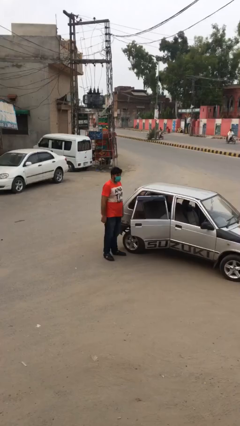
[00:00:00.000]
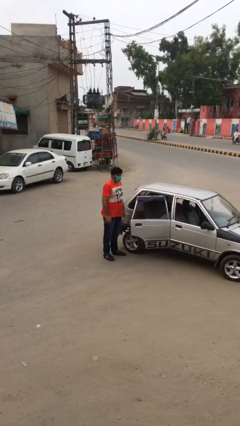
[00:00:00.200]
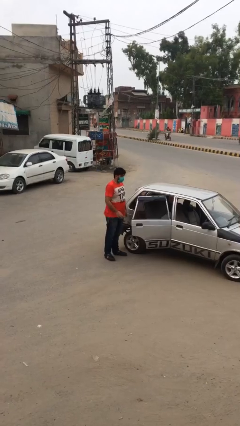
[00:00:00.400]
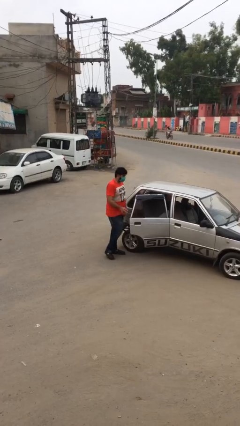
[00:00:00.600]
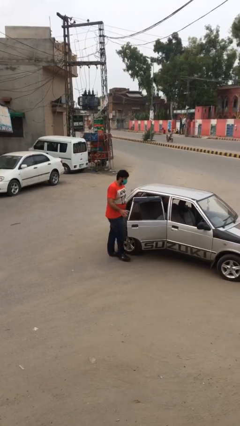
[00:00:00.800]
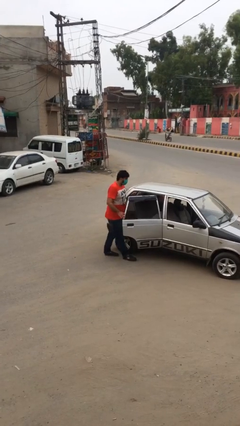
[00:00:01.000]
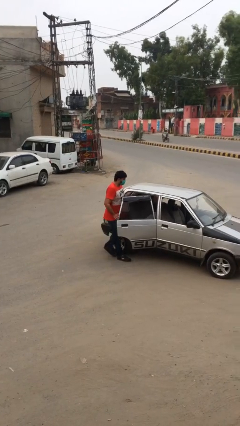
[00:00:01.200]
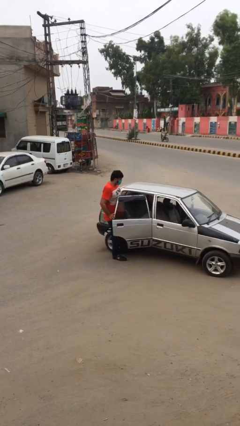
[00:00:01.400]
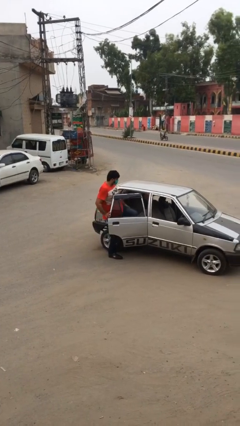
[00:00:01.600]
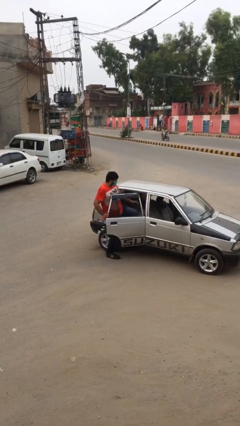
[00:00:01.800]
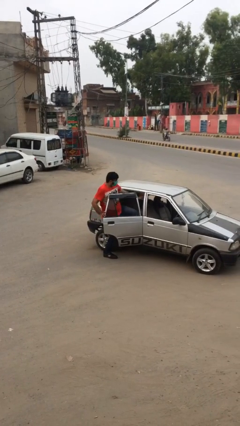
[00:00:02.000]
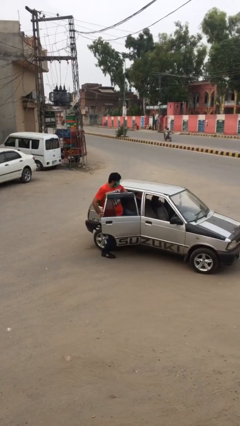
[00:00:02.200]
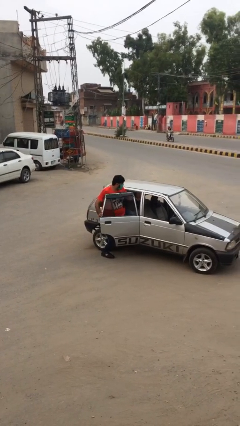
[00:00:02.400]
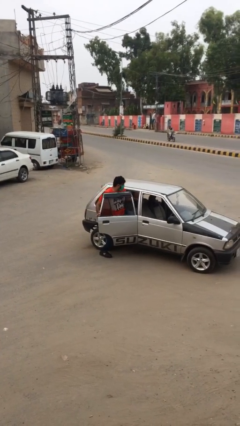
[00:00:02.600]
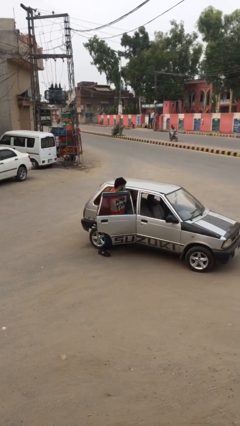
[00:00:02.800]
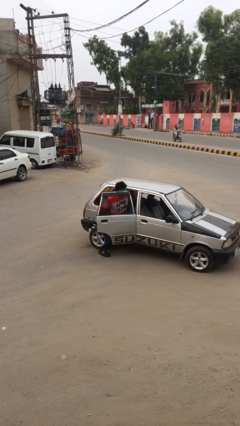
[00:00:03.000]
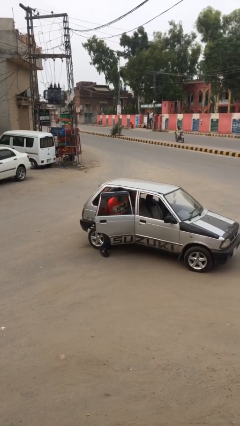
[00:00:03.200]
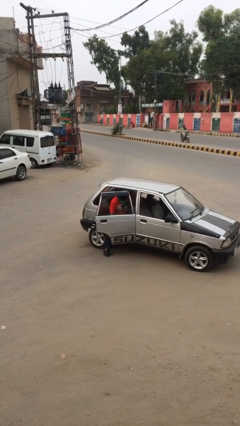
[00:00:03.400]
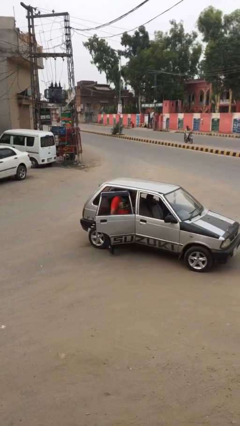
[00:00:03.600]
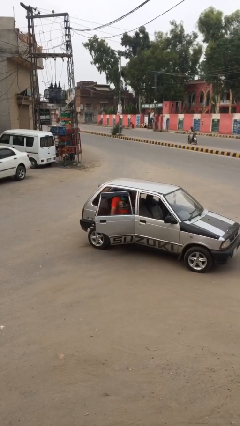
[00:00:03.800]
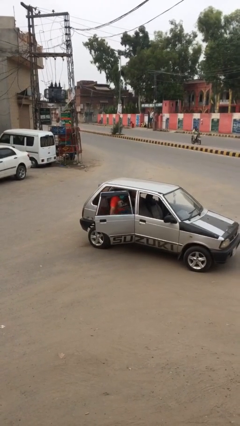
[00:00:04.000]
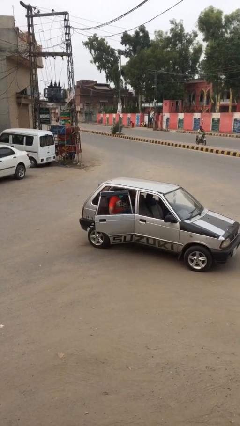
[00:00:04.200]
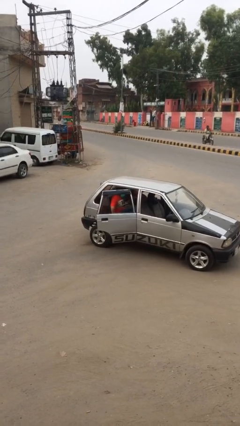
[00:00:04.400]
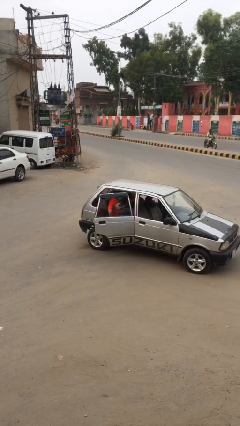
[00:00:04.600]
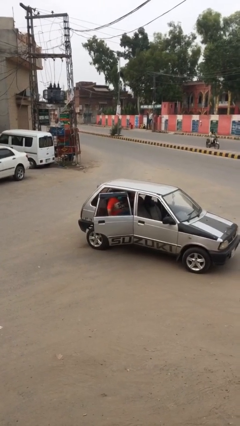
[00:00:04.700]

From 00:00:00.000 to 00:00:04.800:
person enters car

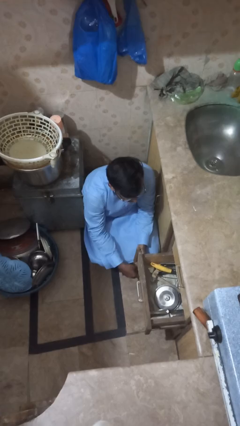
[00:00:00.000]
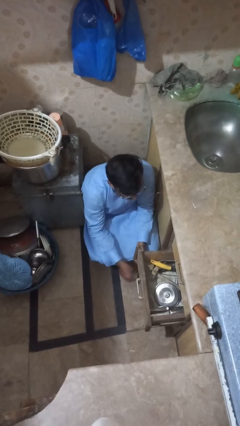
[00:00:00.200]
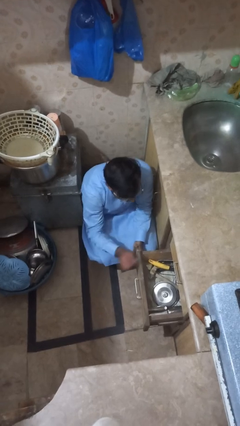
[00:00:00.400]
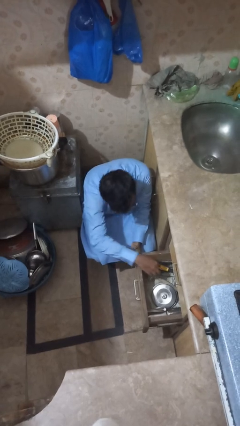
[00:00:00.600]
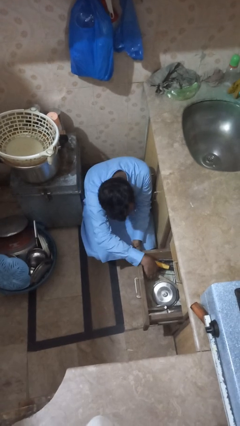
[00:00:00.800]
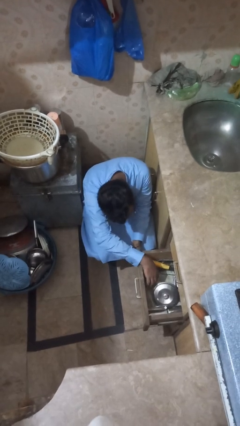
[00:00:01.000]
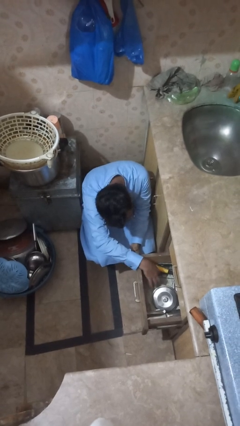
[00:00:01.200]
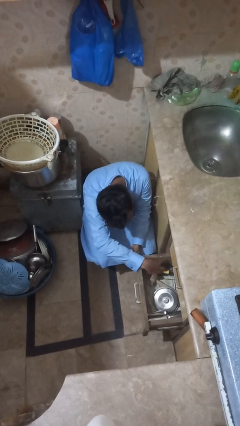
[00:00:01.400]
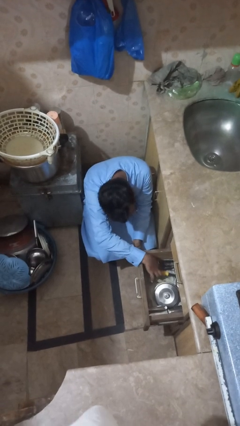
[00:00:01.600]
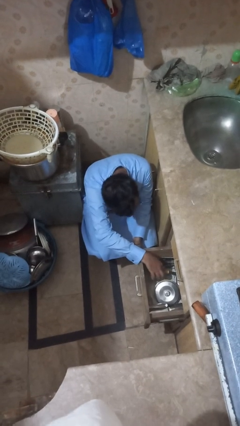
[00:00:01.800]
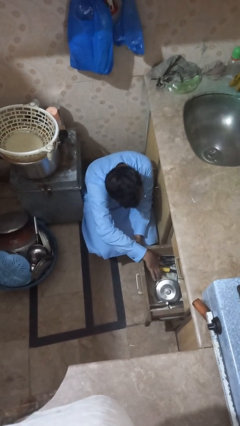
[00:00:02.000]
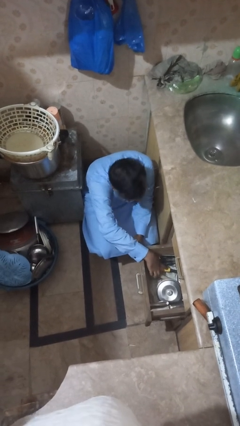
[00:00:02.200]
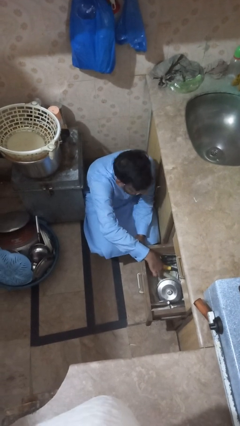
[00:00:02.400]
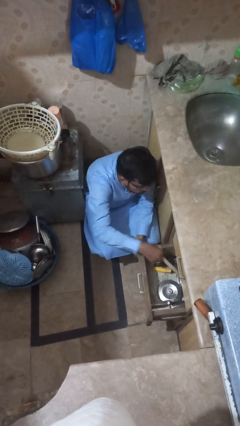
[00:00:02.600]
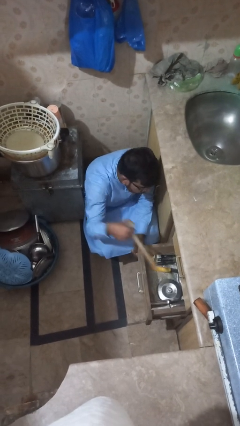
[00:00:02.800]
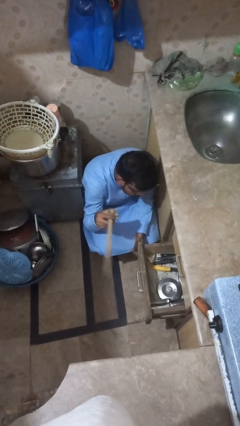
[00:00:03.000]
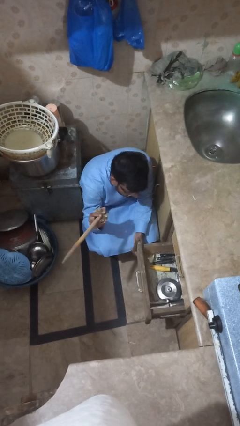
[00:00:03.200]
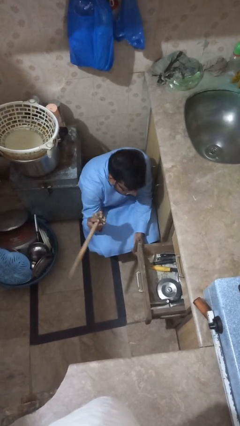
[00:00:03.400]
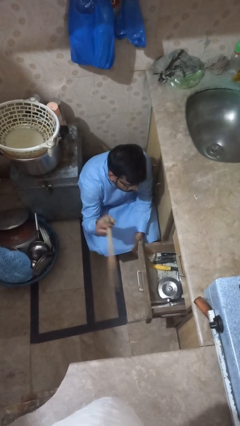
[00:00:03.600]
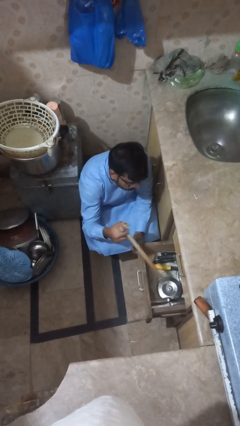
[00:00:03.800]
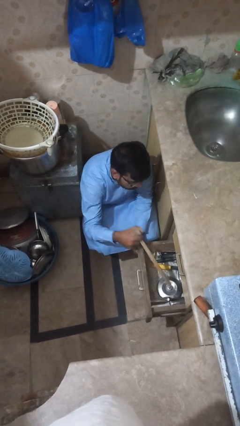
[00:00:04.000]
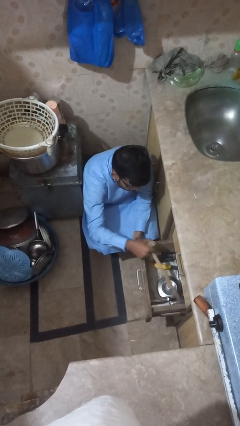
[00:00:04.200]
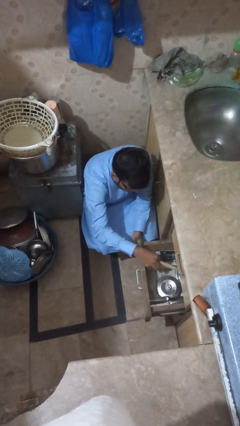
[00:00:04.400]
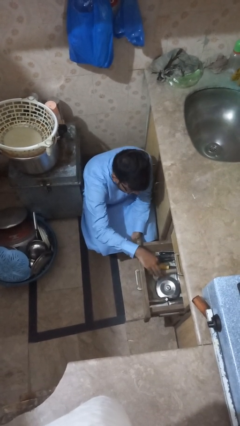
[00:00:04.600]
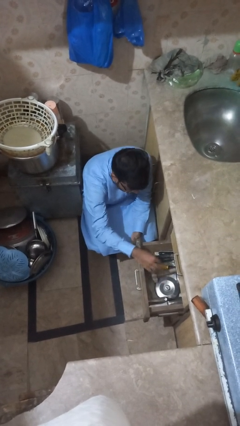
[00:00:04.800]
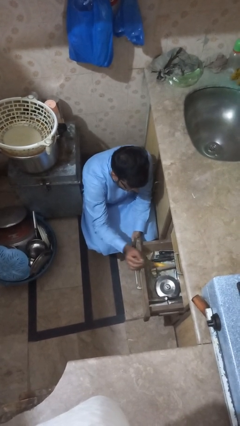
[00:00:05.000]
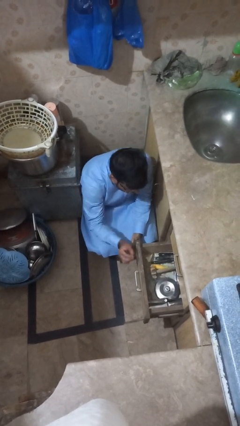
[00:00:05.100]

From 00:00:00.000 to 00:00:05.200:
person searches in kitchen drawer

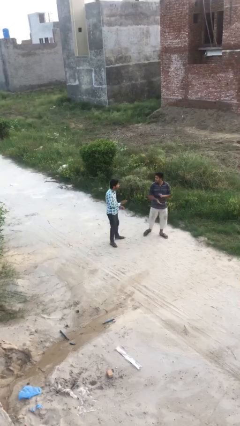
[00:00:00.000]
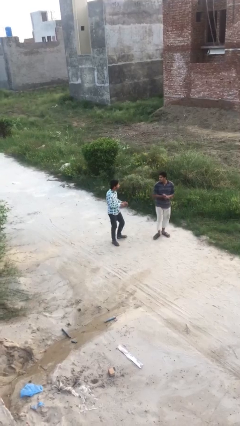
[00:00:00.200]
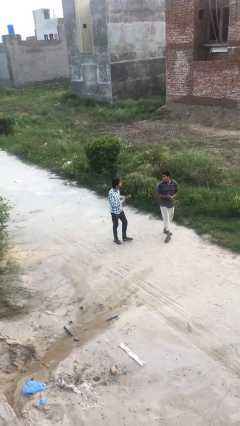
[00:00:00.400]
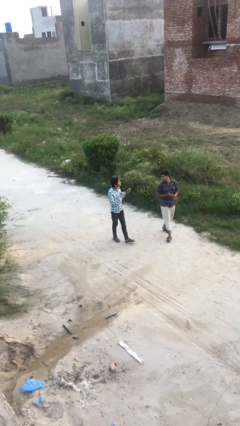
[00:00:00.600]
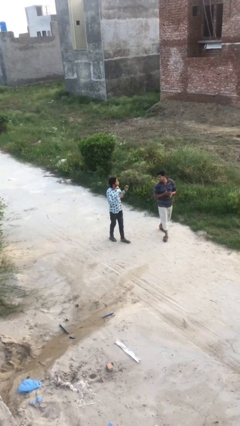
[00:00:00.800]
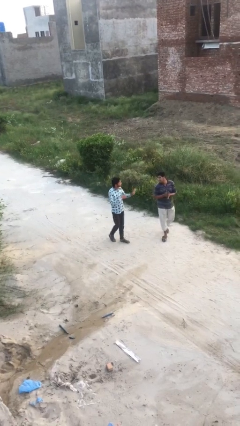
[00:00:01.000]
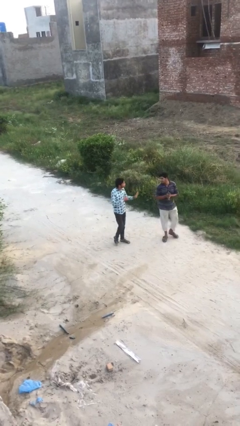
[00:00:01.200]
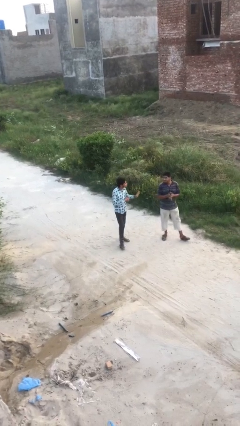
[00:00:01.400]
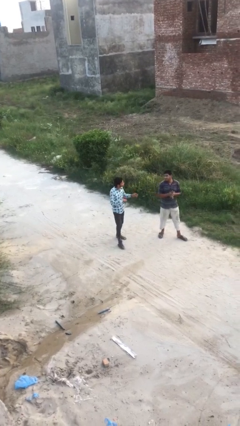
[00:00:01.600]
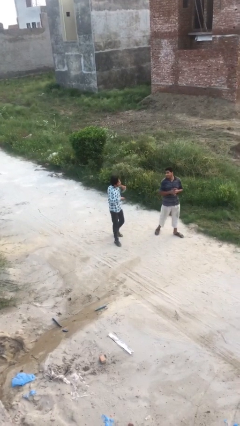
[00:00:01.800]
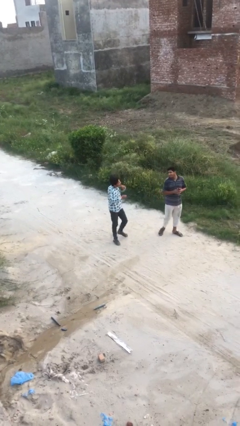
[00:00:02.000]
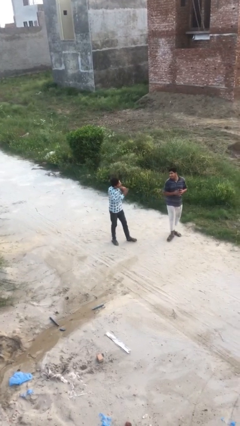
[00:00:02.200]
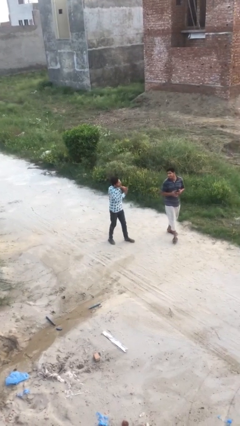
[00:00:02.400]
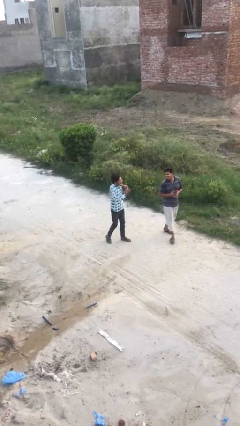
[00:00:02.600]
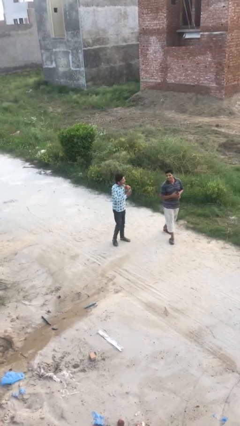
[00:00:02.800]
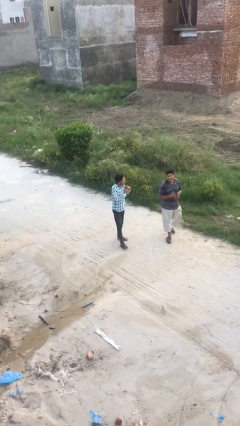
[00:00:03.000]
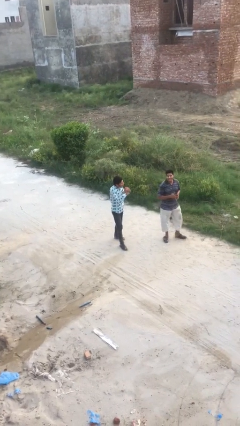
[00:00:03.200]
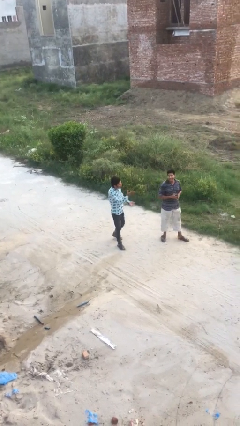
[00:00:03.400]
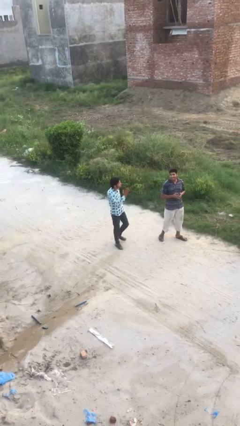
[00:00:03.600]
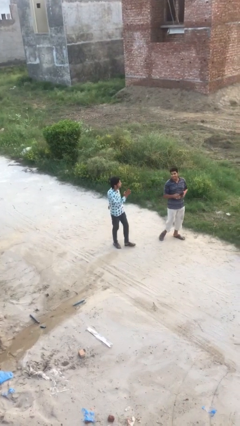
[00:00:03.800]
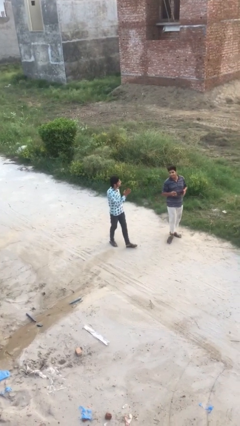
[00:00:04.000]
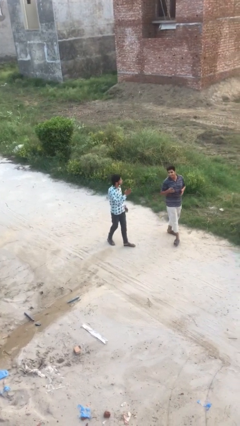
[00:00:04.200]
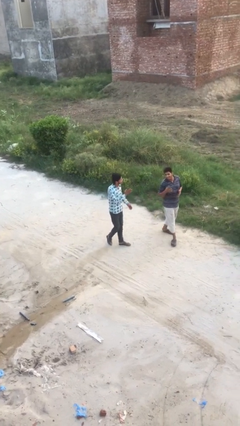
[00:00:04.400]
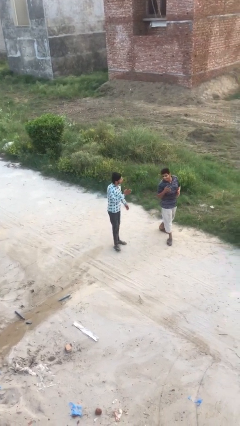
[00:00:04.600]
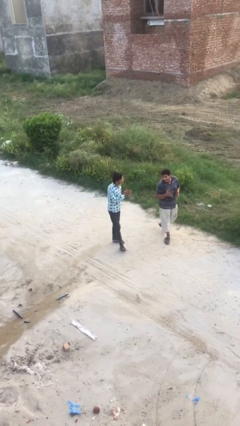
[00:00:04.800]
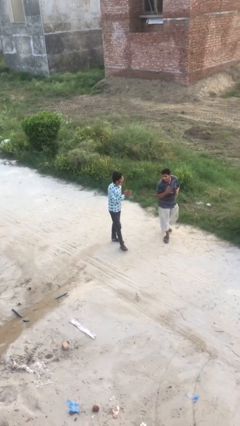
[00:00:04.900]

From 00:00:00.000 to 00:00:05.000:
person talks to person

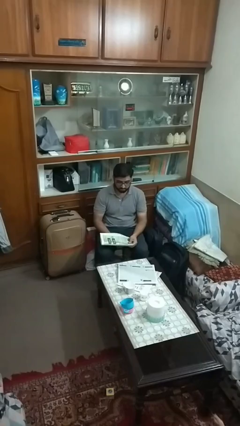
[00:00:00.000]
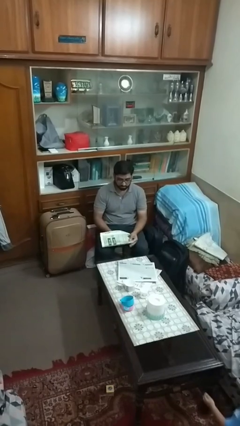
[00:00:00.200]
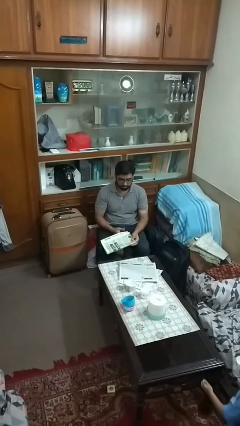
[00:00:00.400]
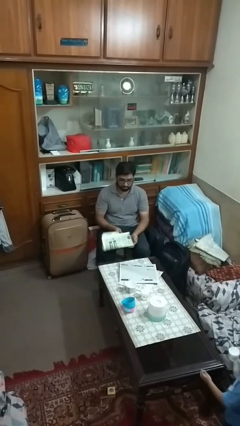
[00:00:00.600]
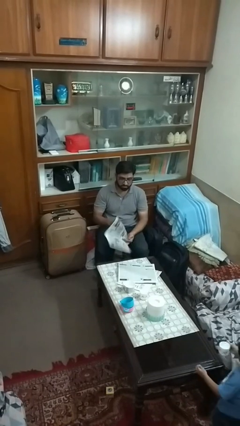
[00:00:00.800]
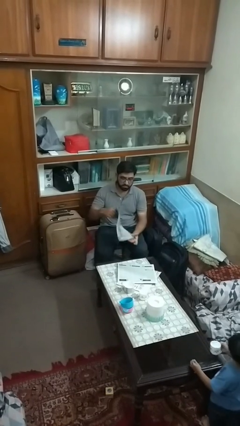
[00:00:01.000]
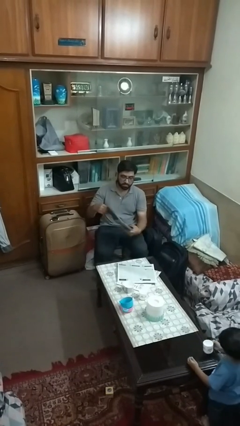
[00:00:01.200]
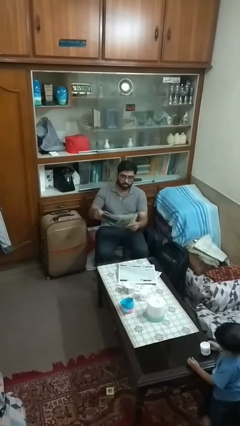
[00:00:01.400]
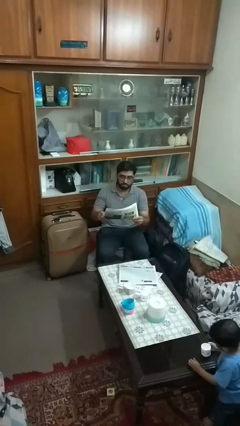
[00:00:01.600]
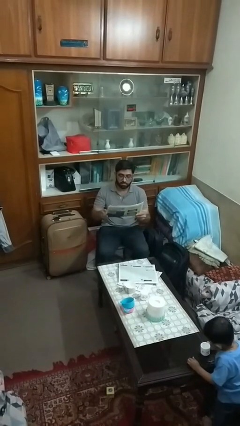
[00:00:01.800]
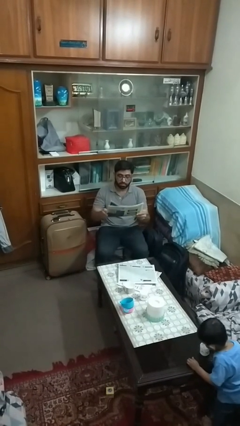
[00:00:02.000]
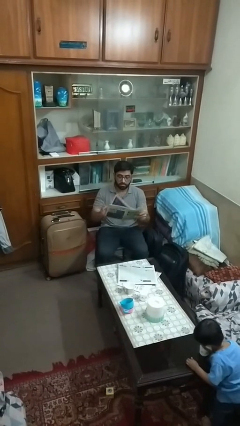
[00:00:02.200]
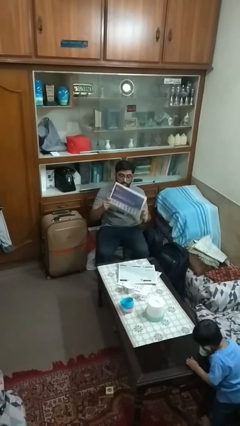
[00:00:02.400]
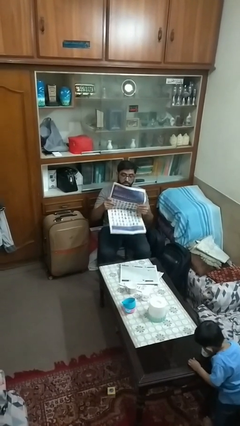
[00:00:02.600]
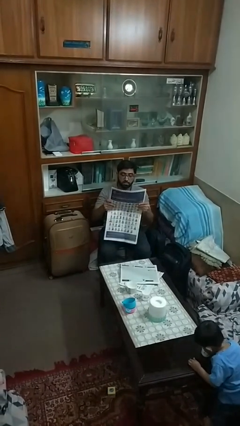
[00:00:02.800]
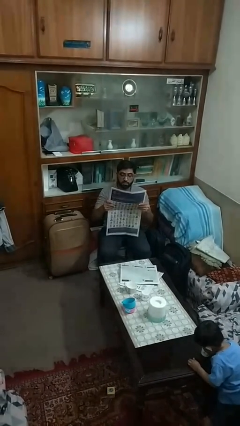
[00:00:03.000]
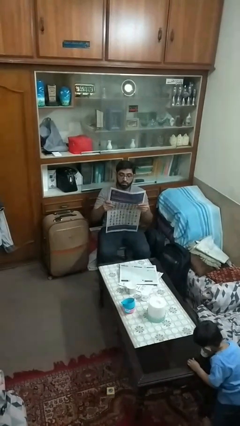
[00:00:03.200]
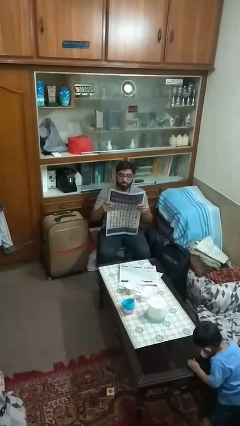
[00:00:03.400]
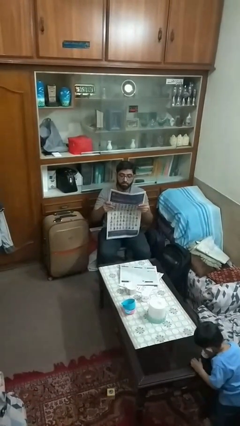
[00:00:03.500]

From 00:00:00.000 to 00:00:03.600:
person reads newspaper
